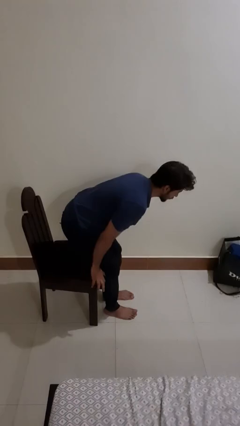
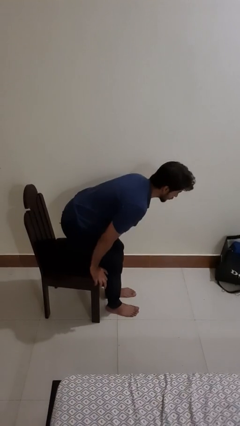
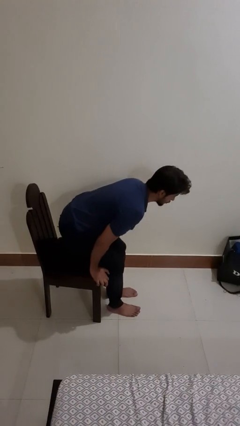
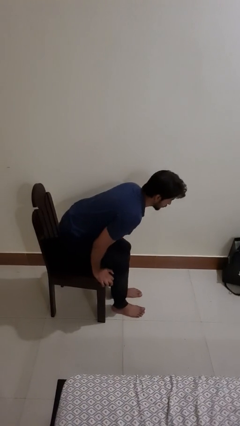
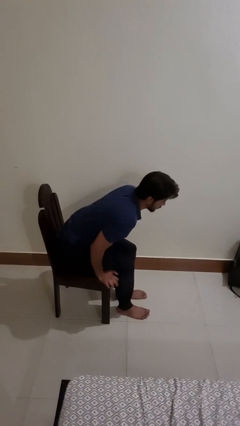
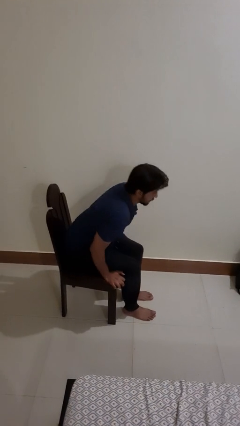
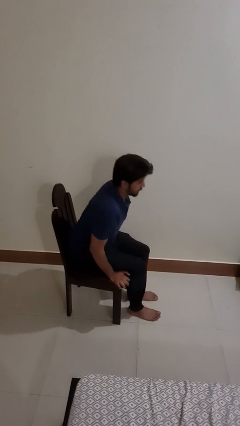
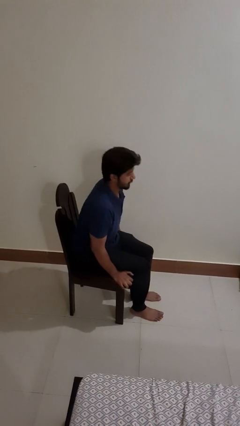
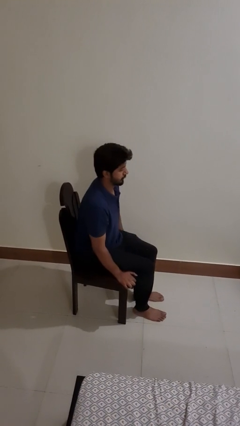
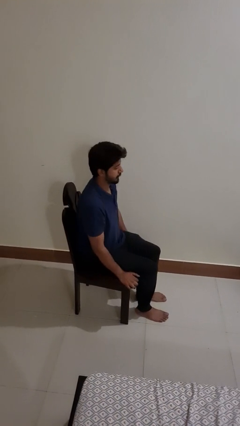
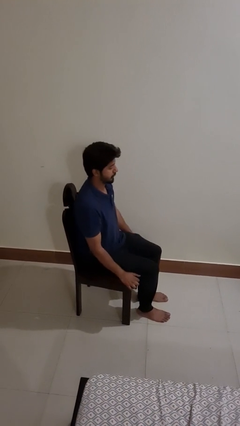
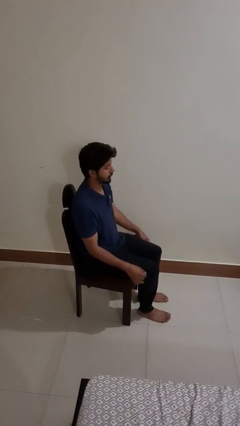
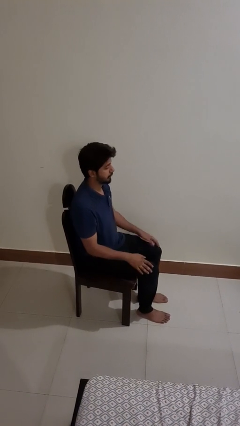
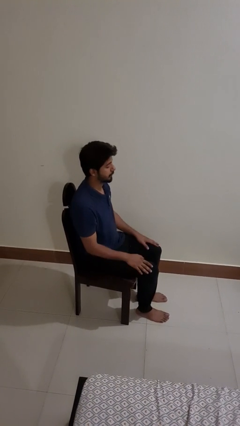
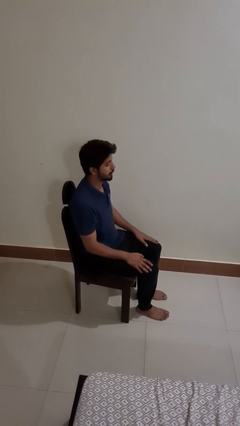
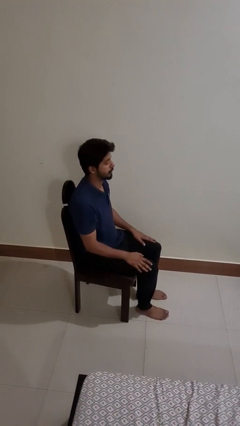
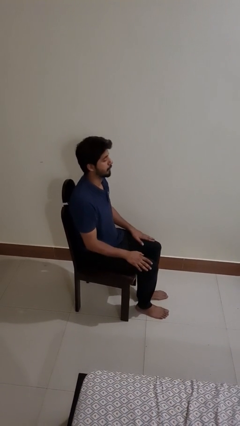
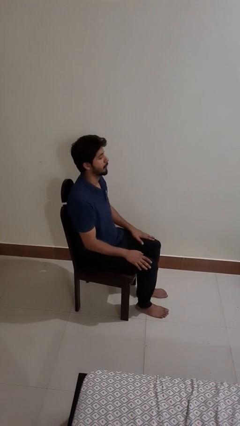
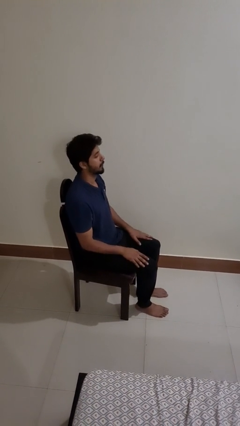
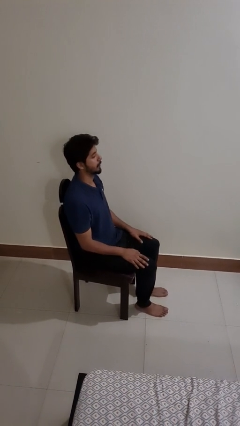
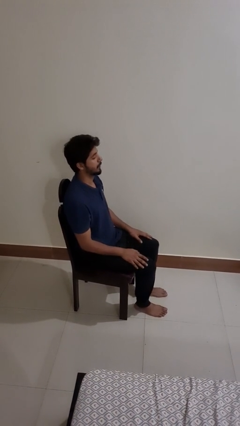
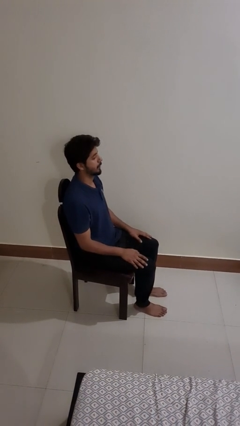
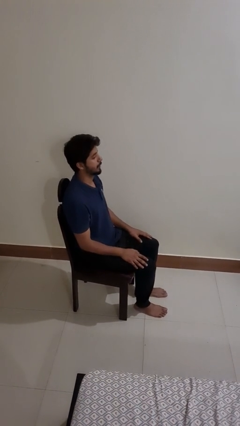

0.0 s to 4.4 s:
person sits down

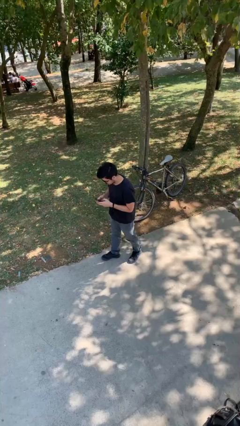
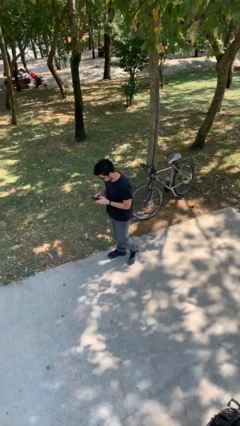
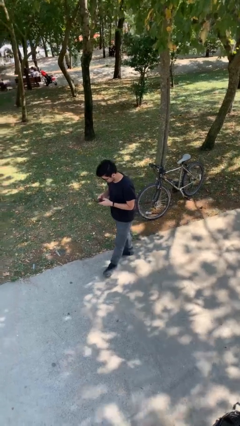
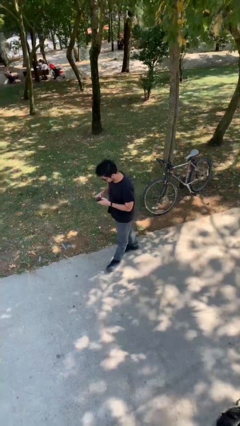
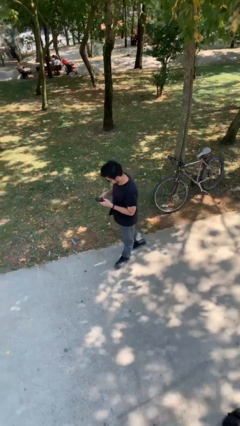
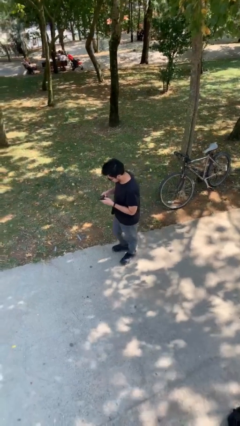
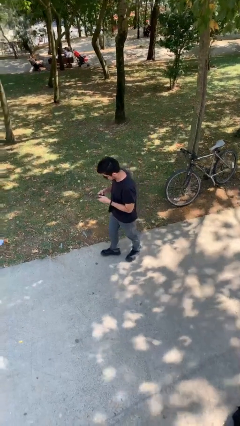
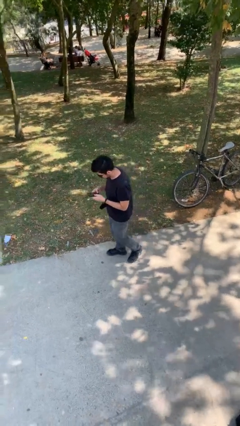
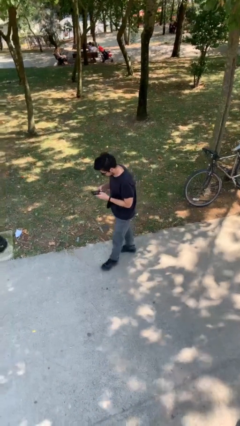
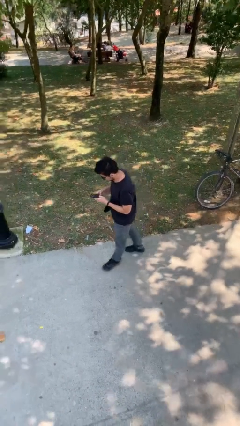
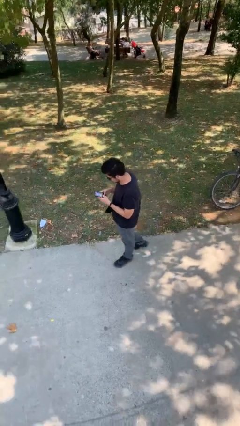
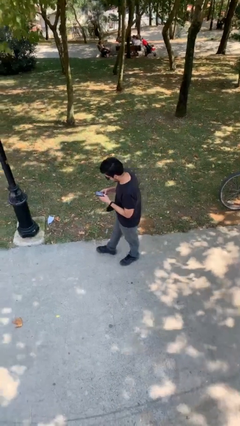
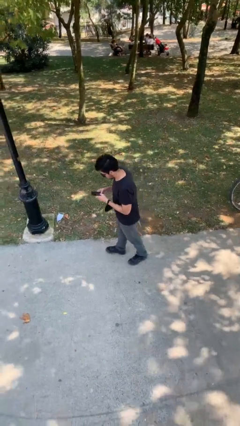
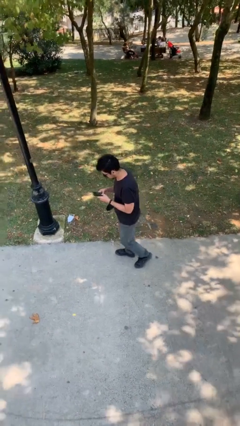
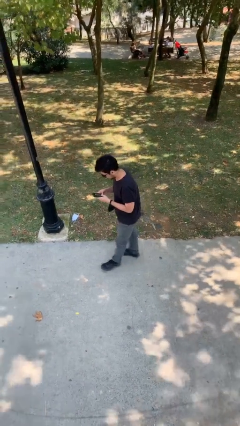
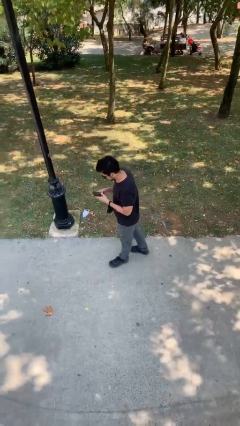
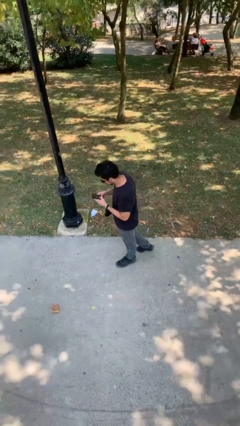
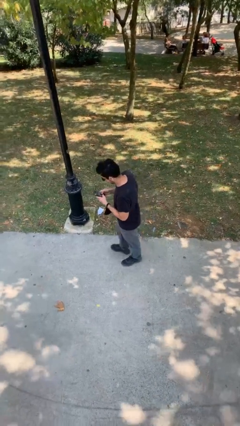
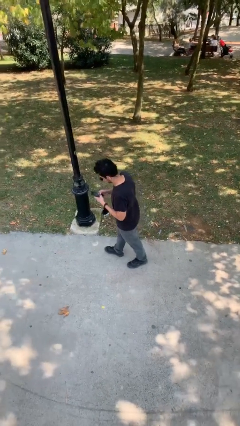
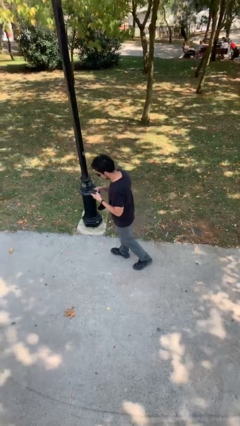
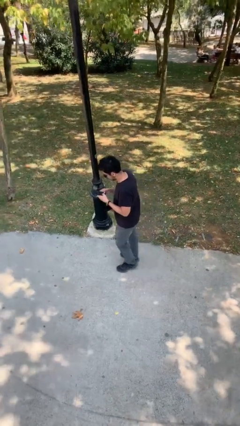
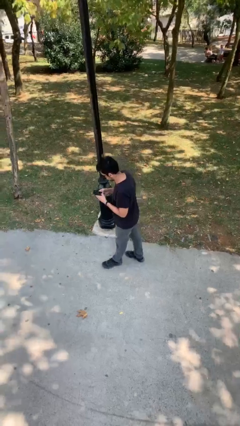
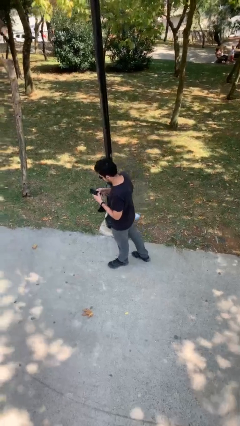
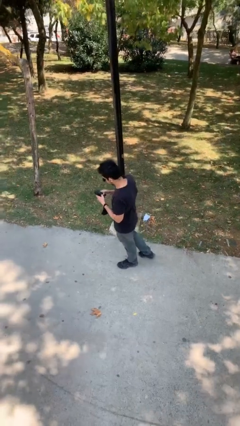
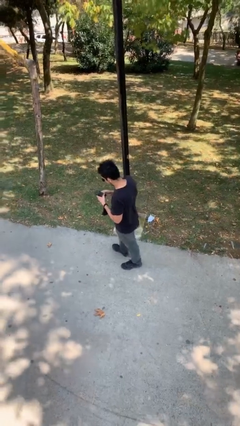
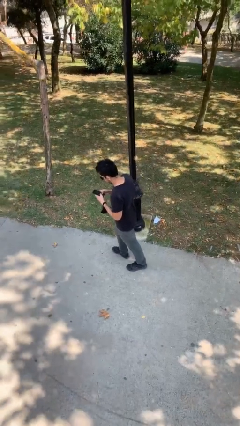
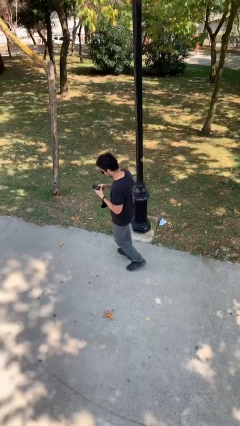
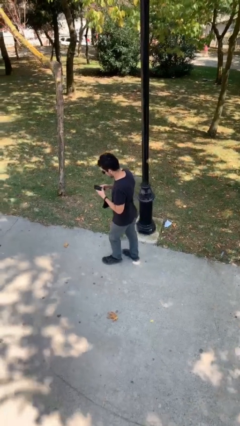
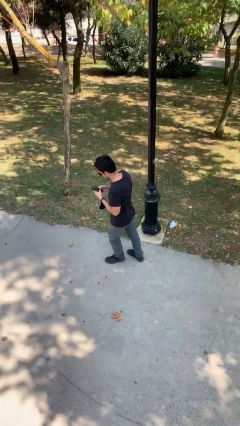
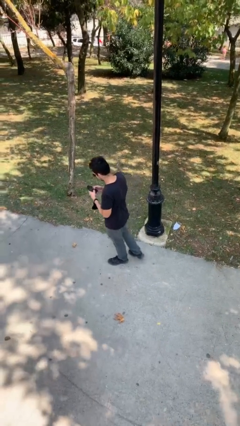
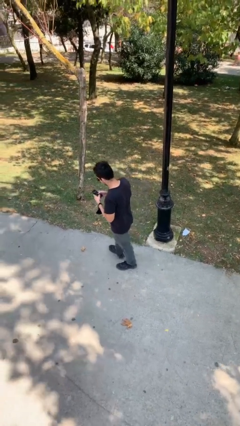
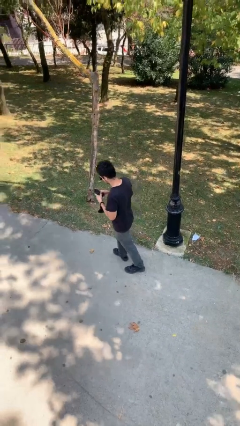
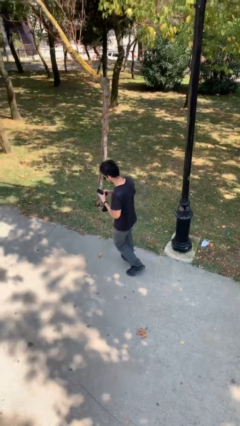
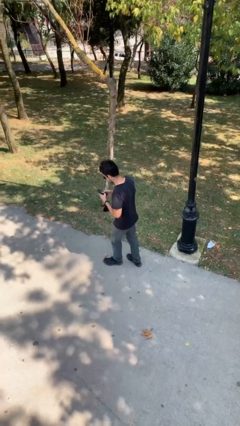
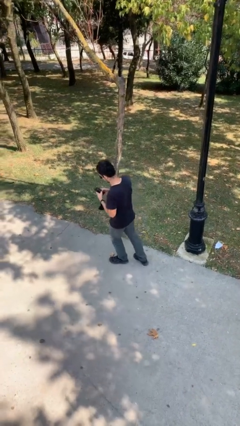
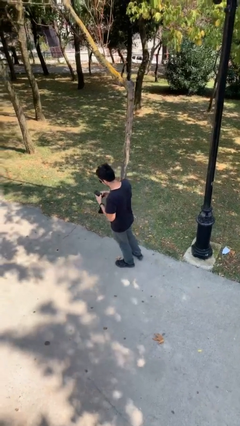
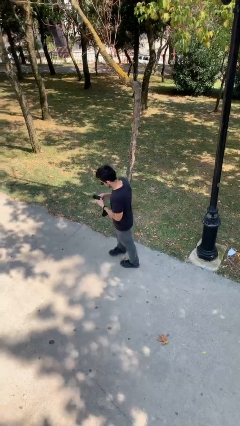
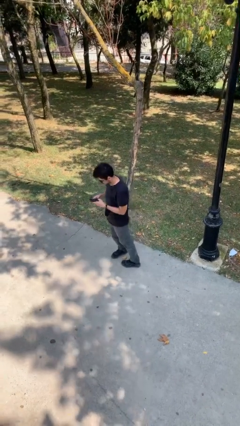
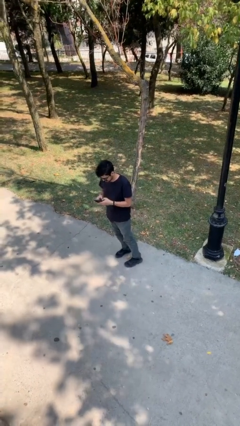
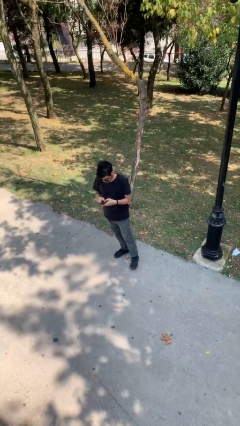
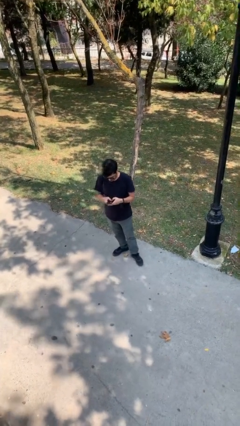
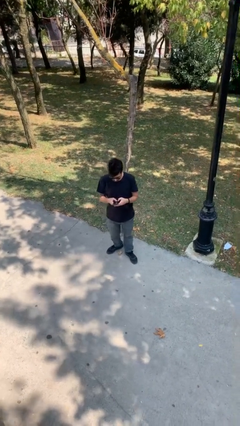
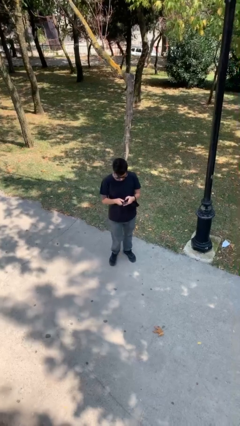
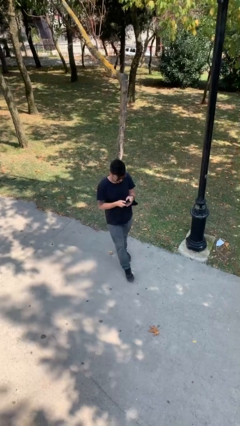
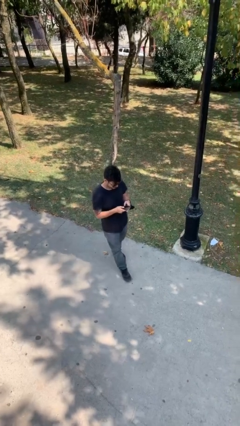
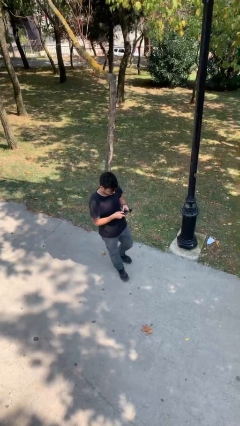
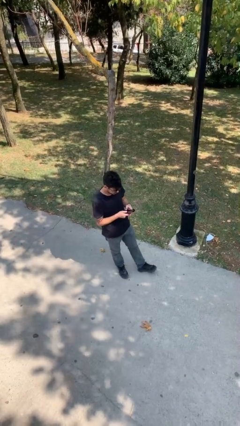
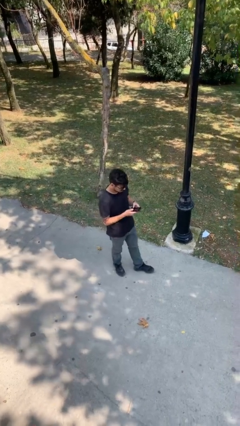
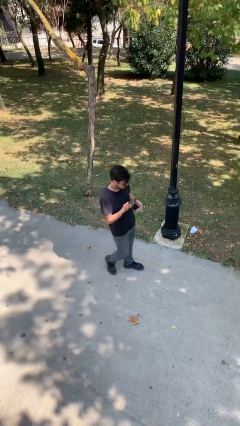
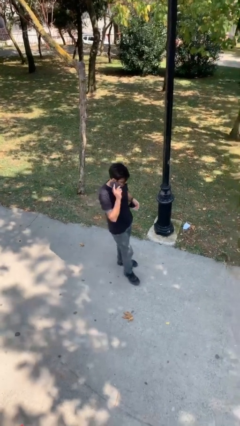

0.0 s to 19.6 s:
person texts on phone

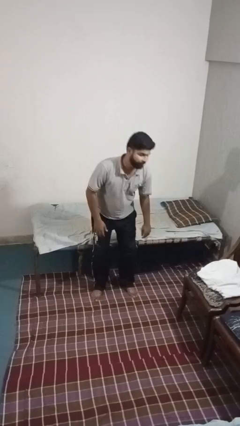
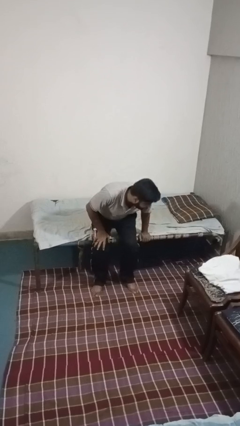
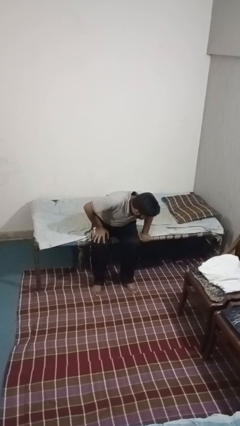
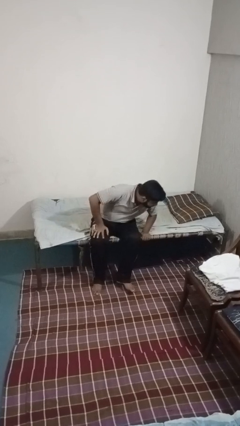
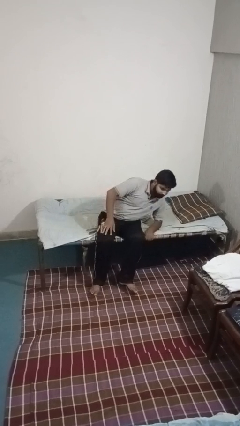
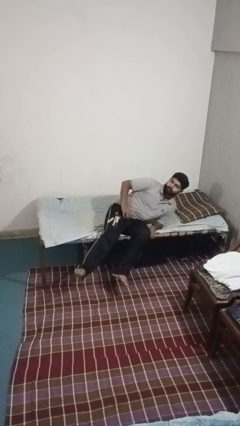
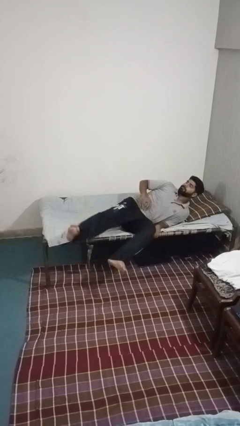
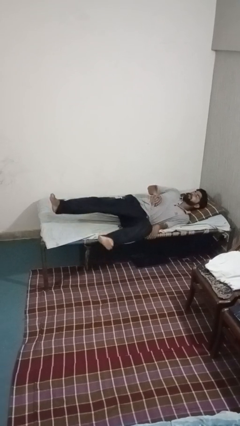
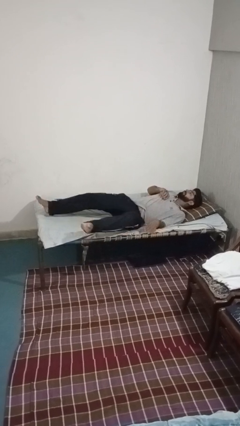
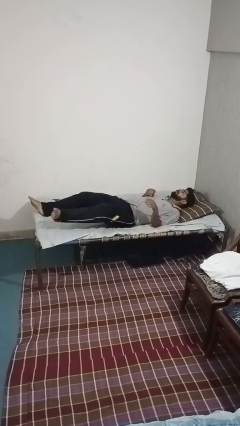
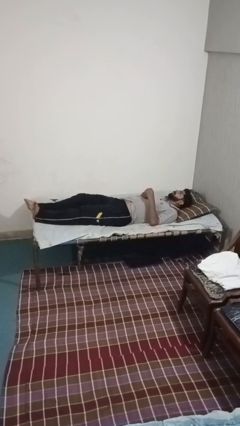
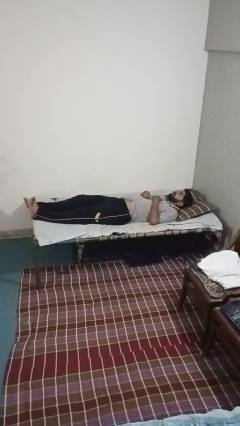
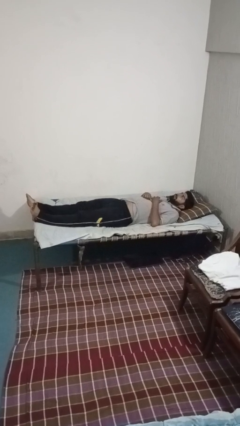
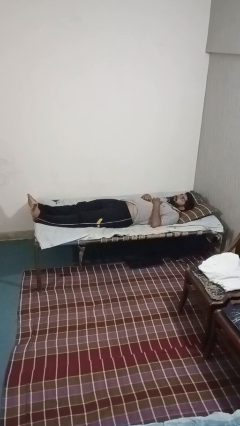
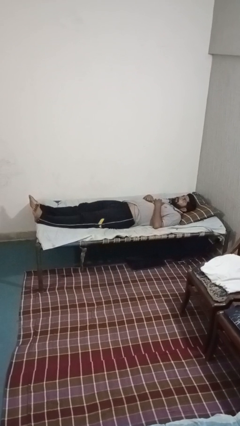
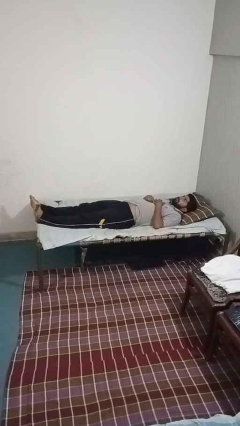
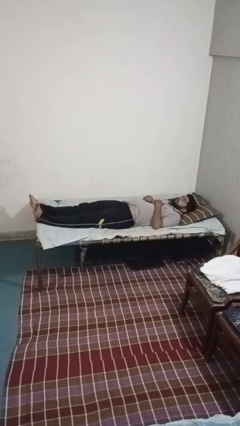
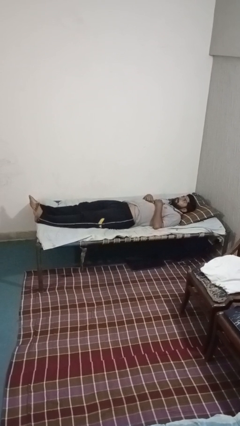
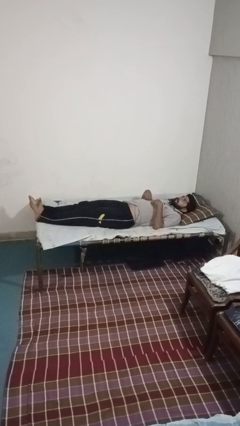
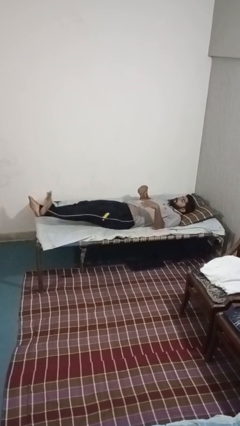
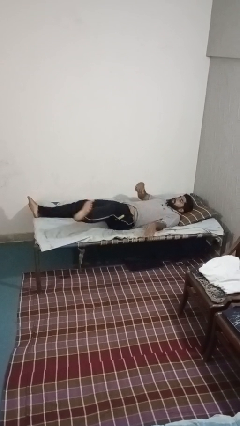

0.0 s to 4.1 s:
person lies down on bed
